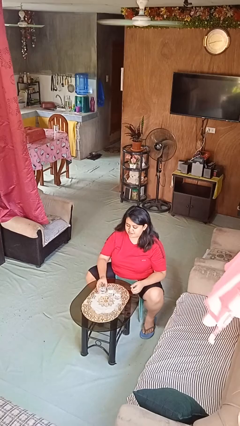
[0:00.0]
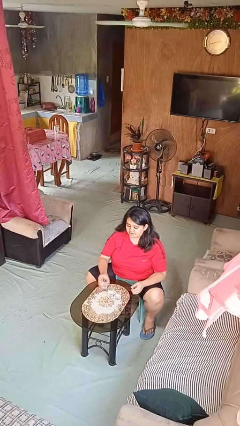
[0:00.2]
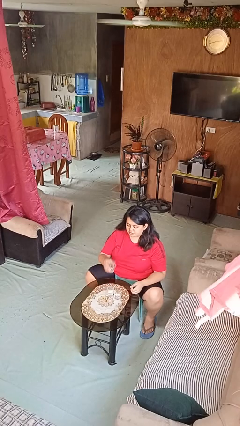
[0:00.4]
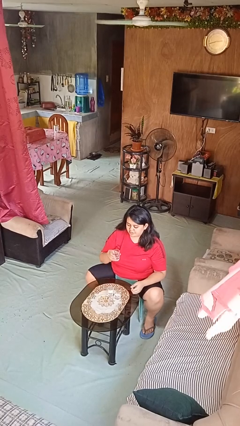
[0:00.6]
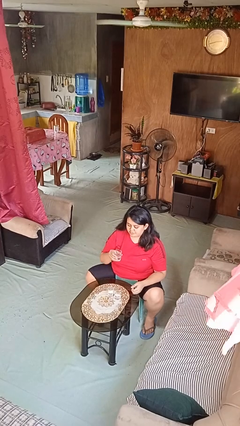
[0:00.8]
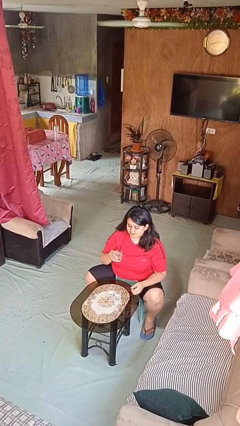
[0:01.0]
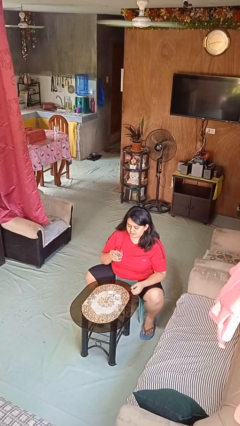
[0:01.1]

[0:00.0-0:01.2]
person picks up object from table

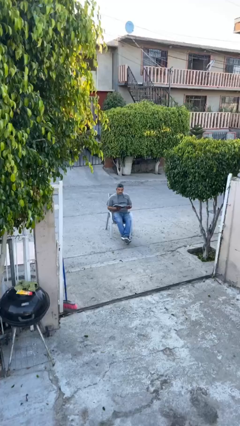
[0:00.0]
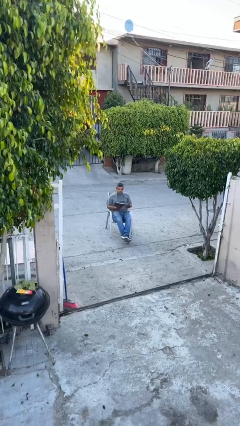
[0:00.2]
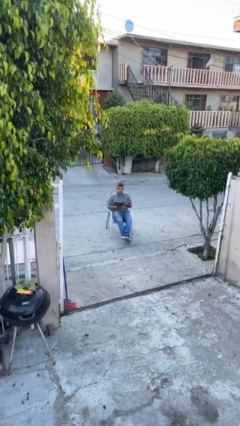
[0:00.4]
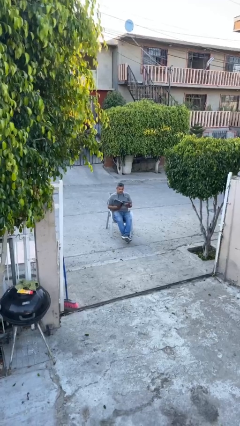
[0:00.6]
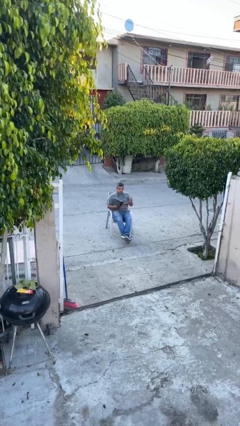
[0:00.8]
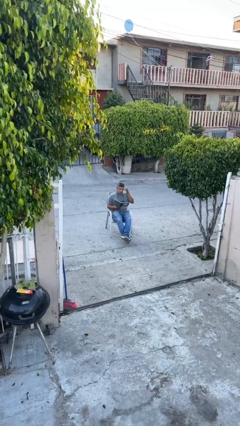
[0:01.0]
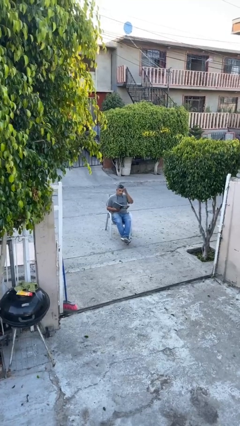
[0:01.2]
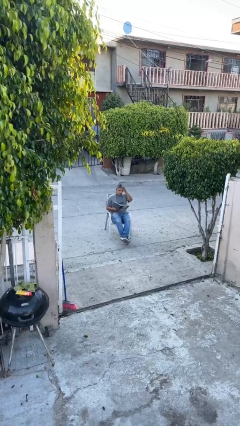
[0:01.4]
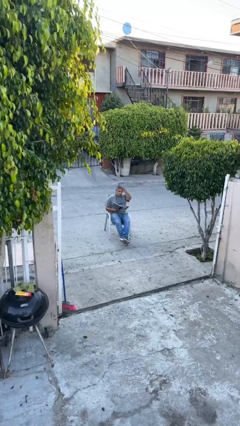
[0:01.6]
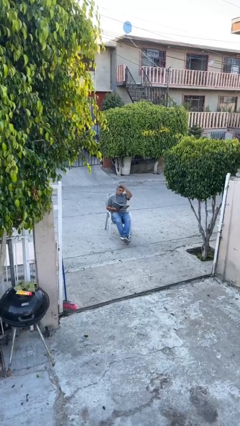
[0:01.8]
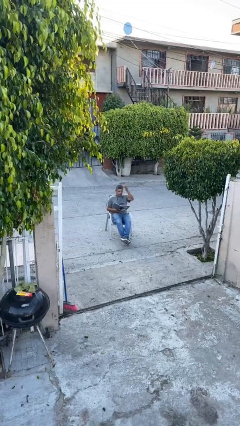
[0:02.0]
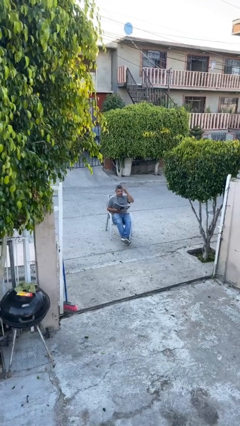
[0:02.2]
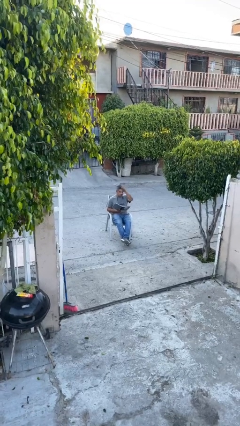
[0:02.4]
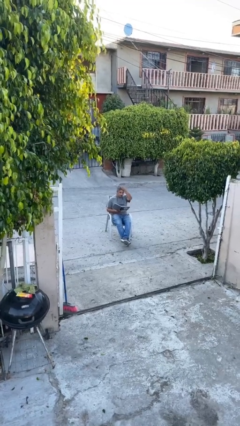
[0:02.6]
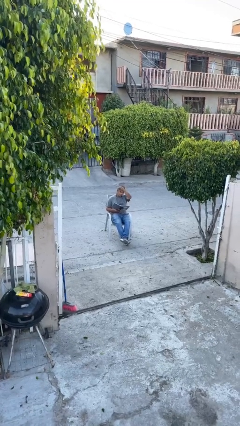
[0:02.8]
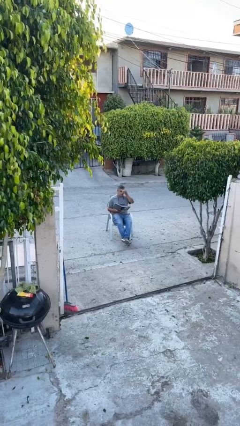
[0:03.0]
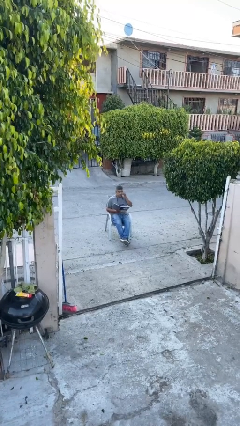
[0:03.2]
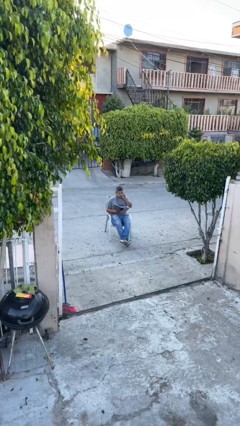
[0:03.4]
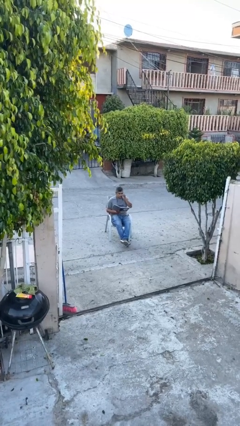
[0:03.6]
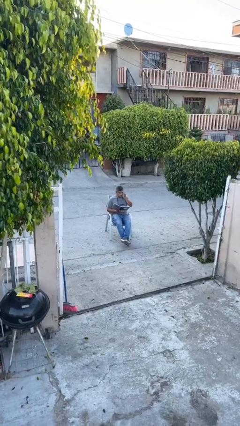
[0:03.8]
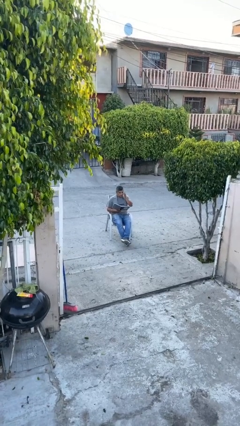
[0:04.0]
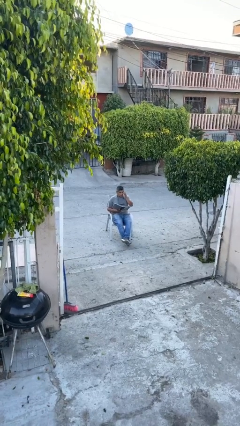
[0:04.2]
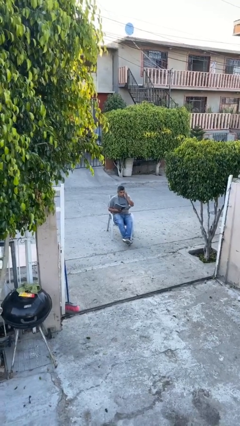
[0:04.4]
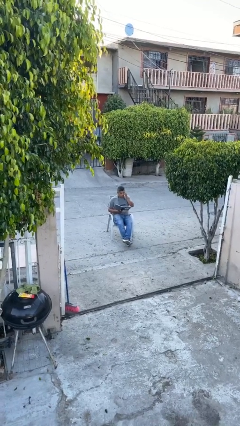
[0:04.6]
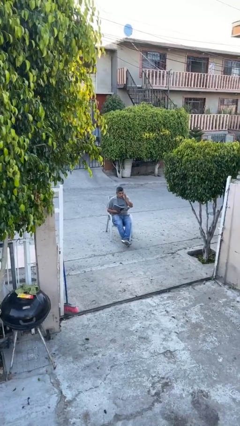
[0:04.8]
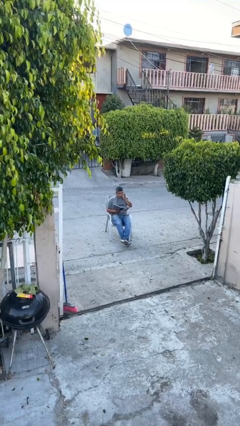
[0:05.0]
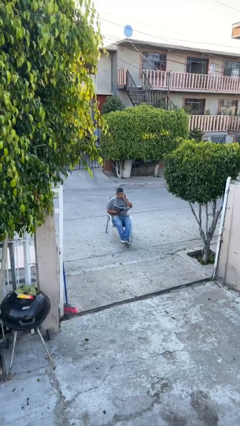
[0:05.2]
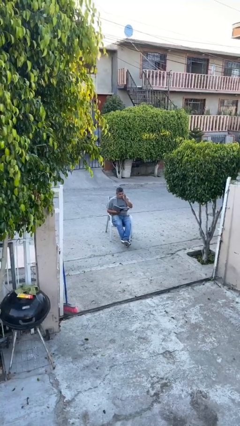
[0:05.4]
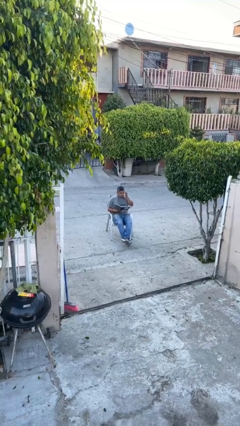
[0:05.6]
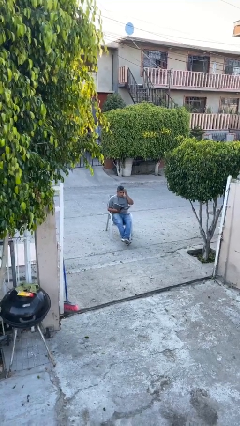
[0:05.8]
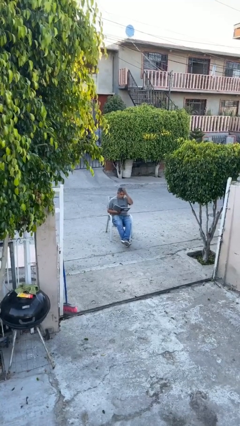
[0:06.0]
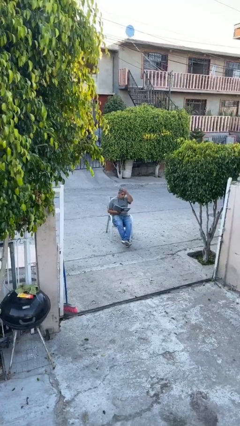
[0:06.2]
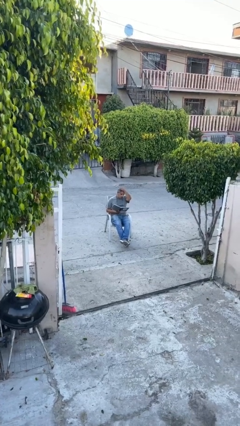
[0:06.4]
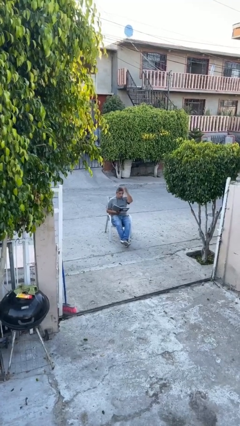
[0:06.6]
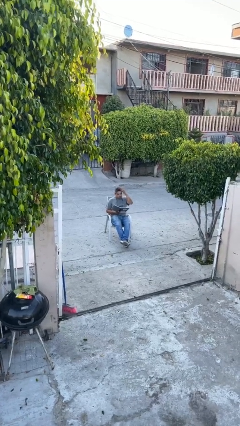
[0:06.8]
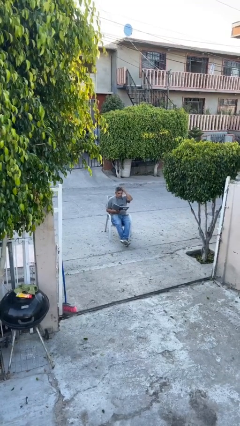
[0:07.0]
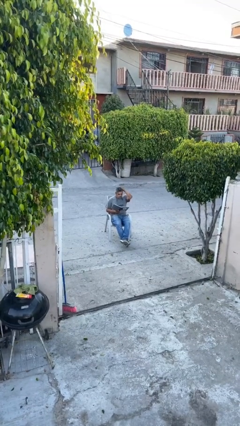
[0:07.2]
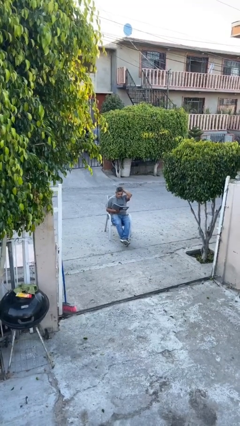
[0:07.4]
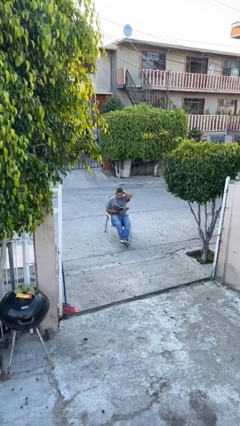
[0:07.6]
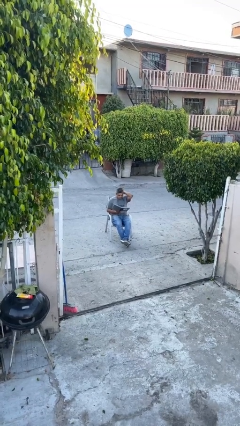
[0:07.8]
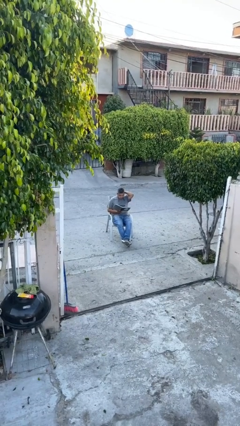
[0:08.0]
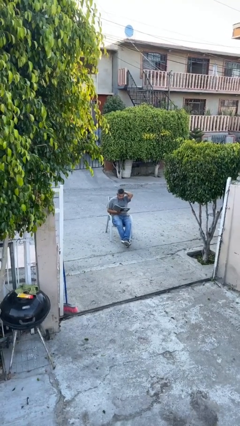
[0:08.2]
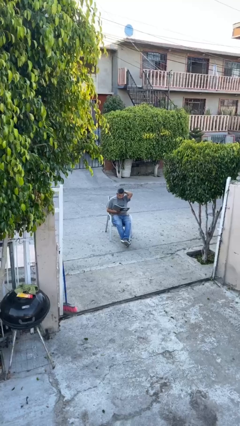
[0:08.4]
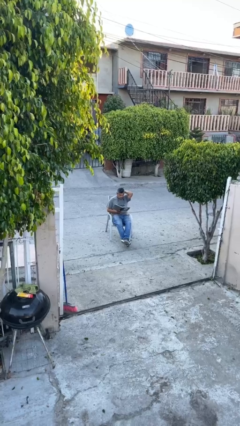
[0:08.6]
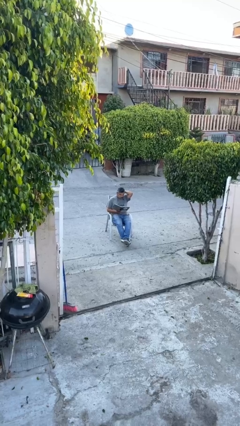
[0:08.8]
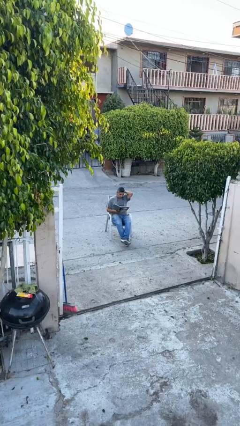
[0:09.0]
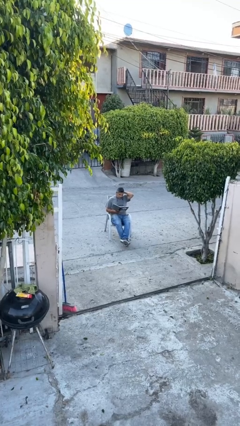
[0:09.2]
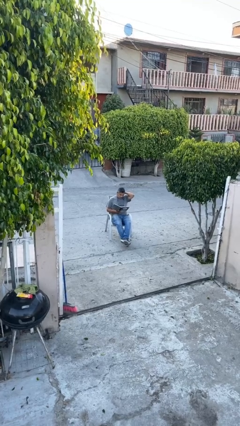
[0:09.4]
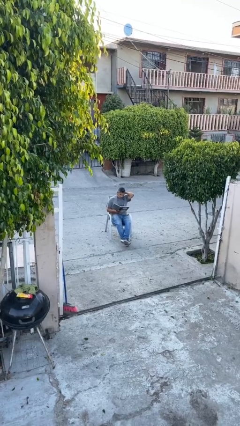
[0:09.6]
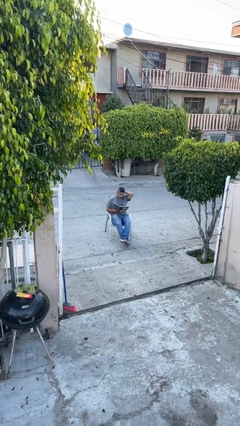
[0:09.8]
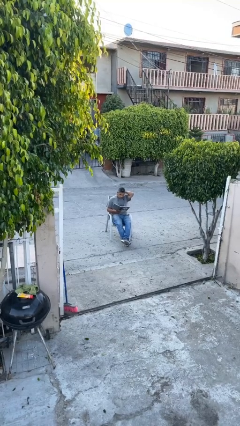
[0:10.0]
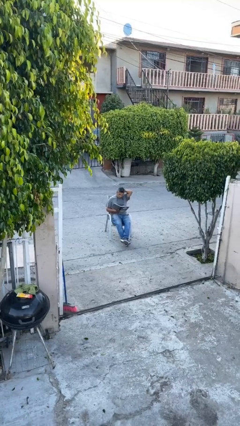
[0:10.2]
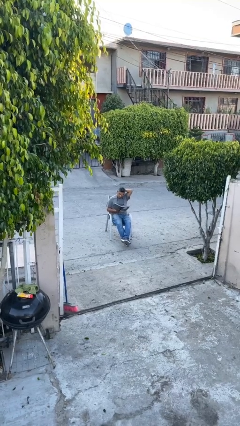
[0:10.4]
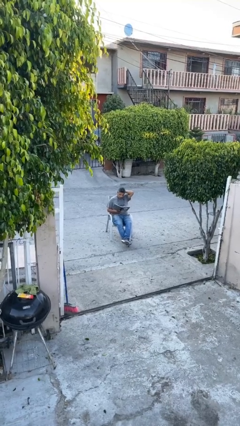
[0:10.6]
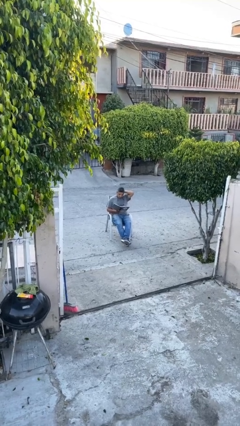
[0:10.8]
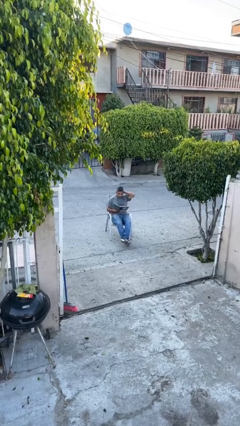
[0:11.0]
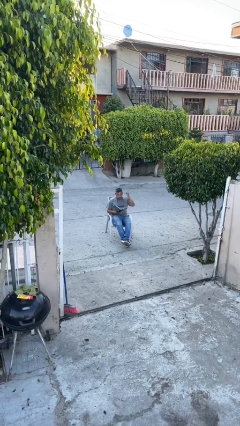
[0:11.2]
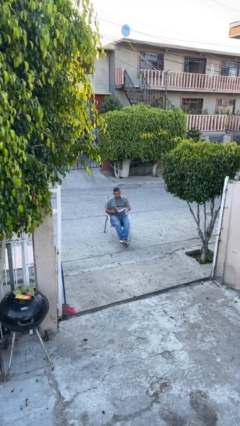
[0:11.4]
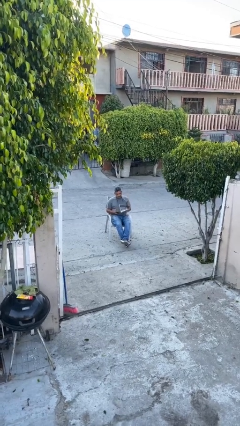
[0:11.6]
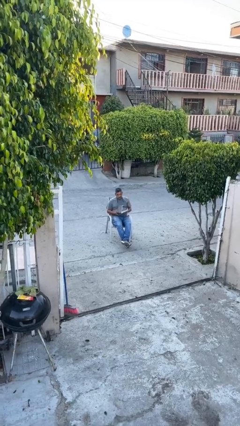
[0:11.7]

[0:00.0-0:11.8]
person reads document

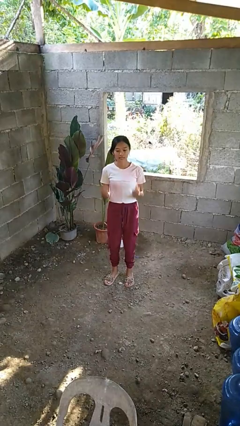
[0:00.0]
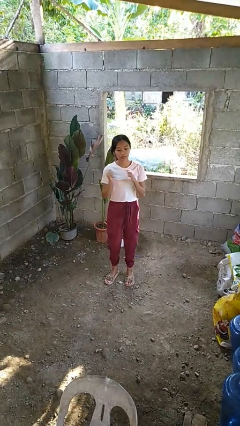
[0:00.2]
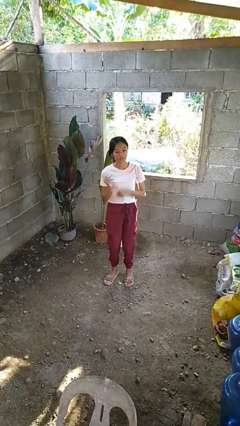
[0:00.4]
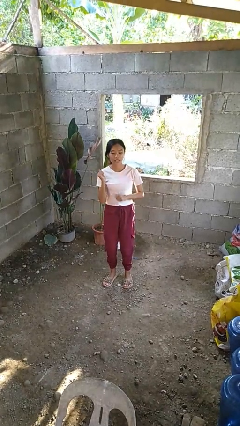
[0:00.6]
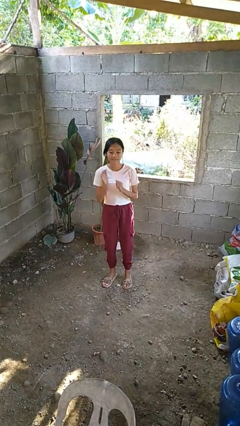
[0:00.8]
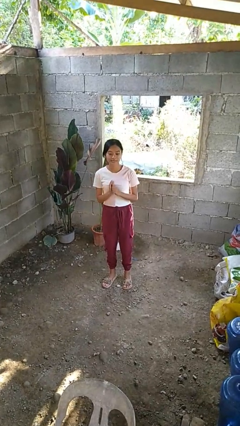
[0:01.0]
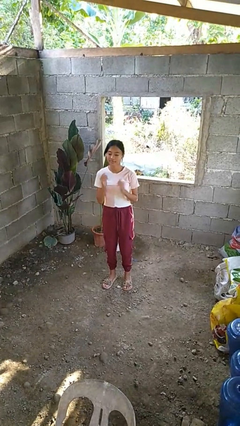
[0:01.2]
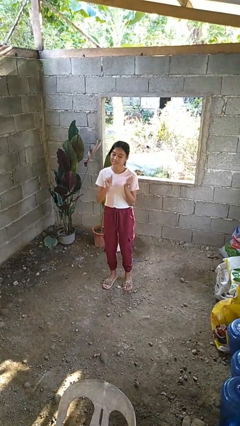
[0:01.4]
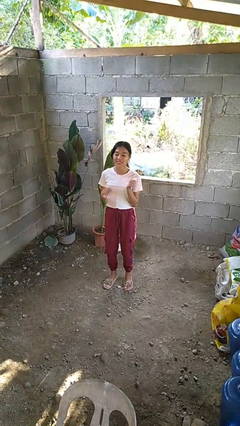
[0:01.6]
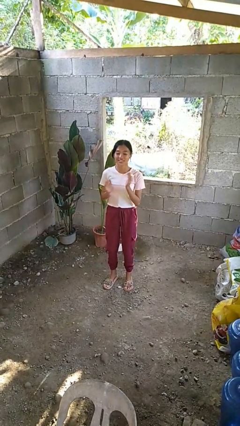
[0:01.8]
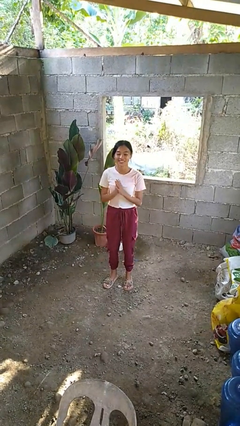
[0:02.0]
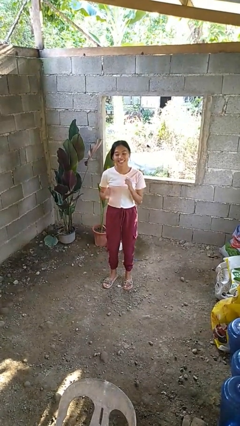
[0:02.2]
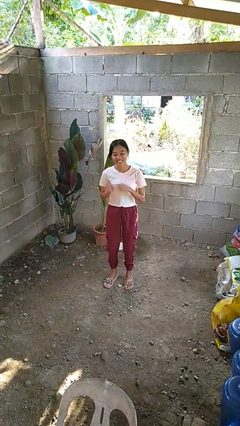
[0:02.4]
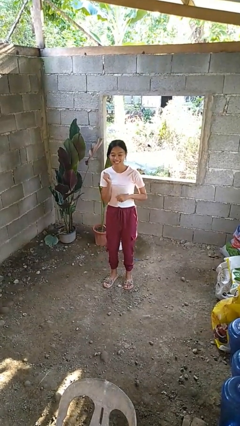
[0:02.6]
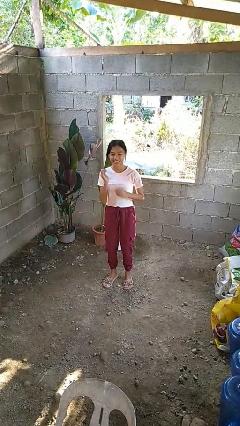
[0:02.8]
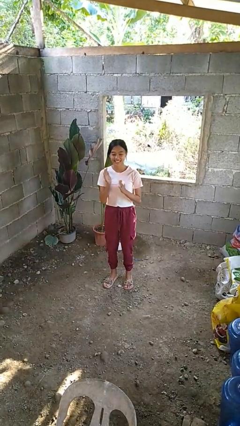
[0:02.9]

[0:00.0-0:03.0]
person dances in place

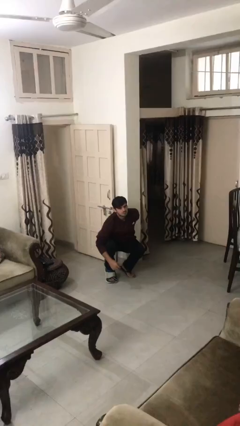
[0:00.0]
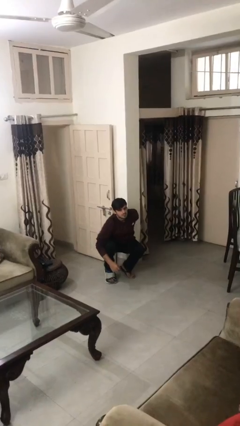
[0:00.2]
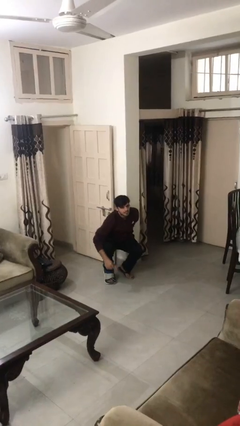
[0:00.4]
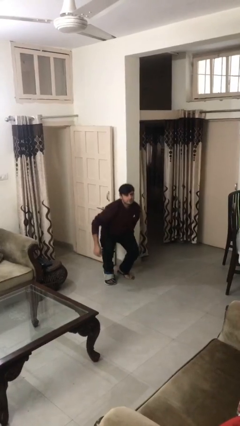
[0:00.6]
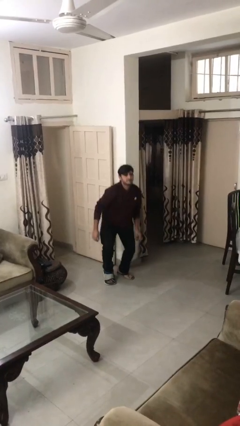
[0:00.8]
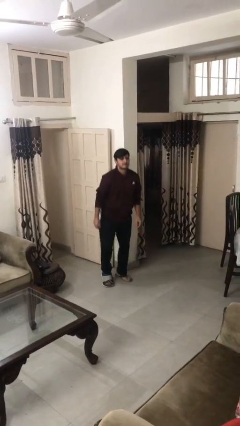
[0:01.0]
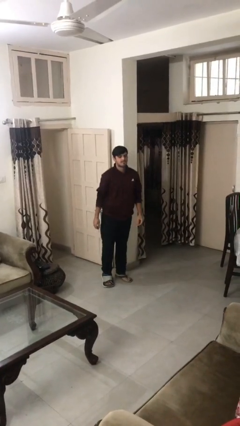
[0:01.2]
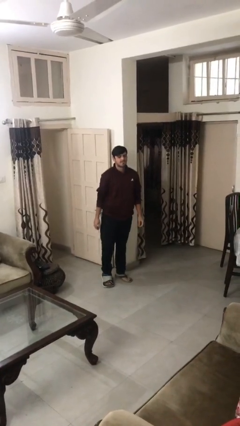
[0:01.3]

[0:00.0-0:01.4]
person stands up

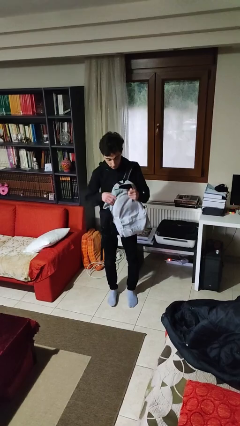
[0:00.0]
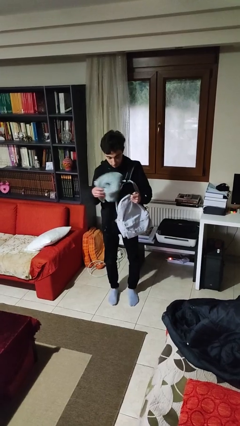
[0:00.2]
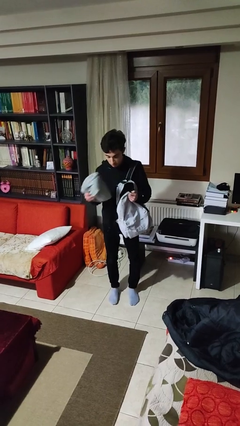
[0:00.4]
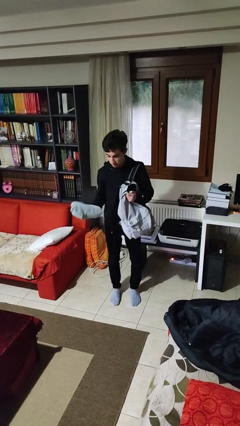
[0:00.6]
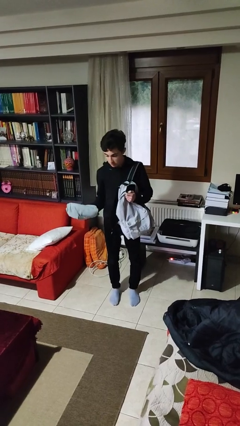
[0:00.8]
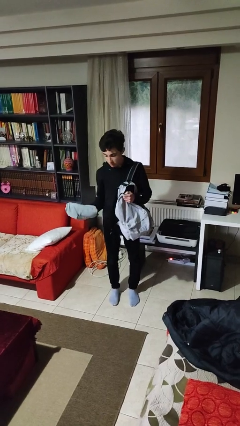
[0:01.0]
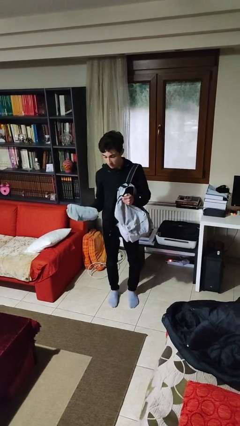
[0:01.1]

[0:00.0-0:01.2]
person takes object from backpack
